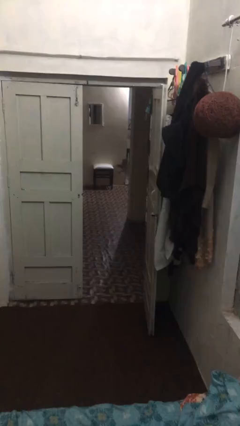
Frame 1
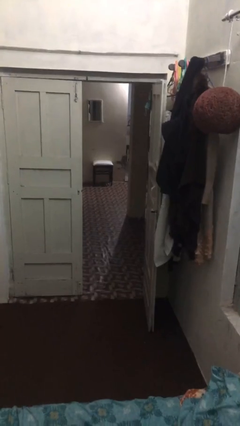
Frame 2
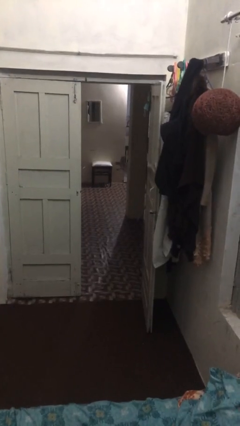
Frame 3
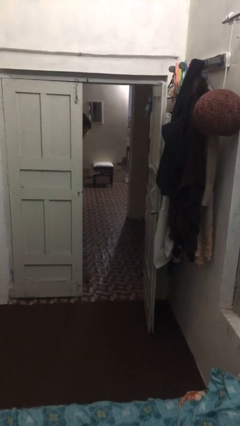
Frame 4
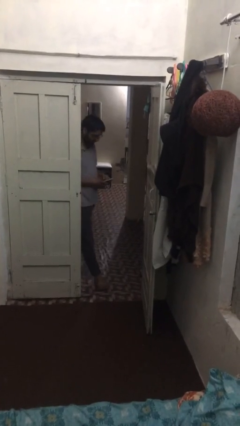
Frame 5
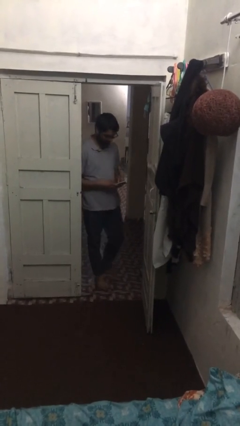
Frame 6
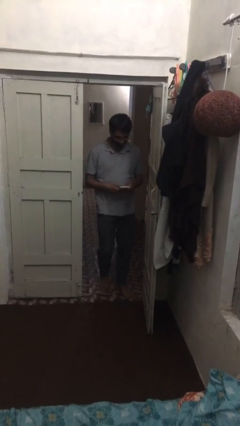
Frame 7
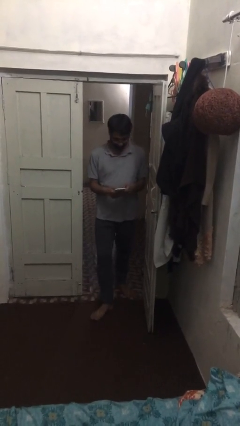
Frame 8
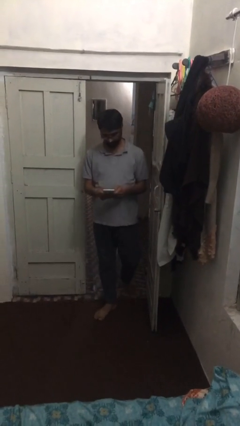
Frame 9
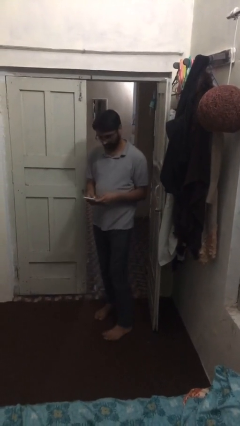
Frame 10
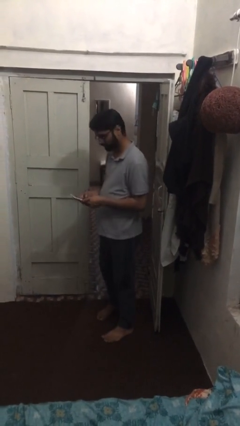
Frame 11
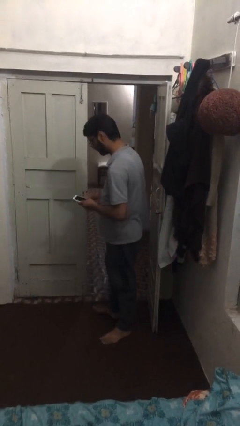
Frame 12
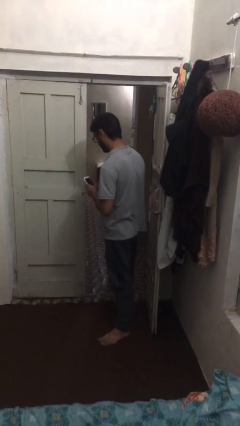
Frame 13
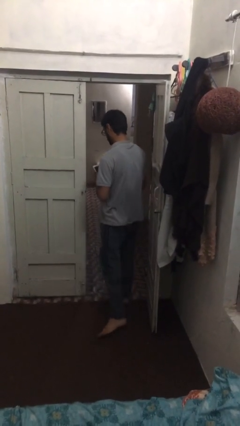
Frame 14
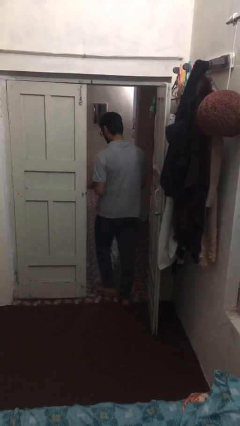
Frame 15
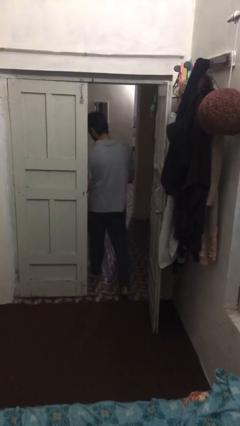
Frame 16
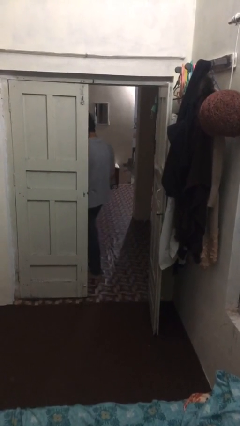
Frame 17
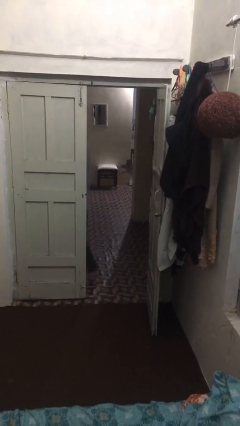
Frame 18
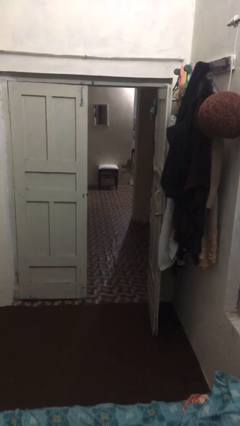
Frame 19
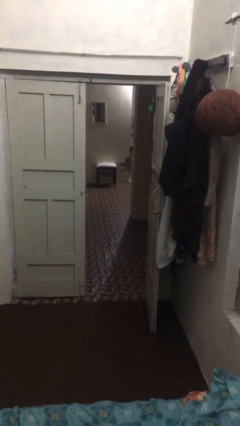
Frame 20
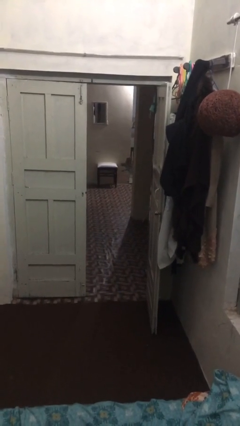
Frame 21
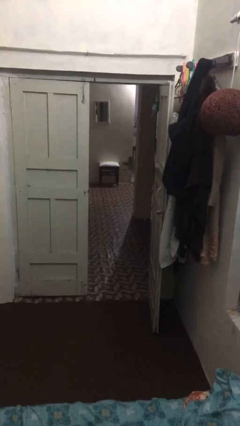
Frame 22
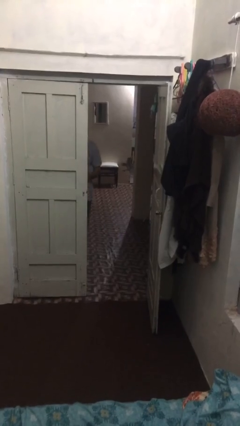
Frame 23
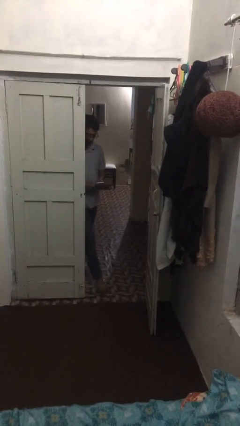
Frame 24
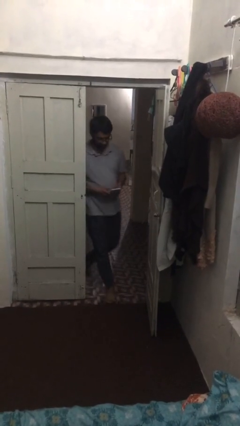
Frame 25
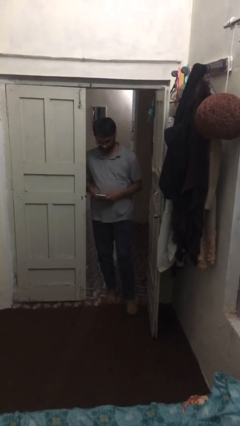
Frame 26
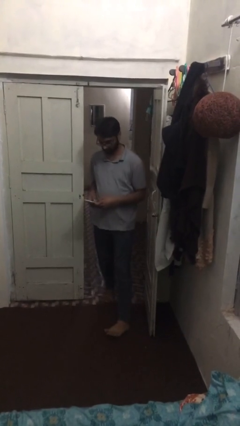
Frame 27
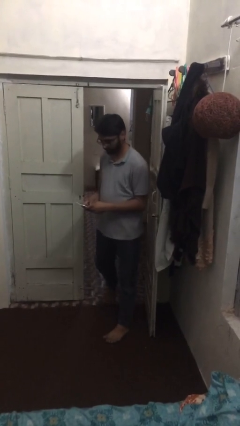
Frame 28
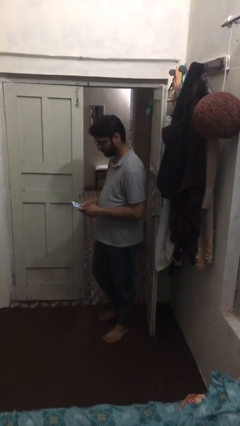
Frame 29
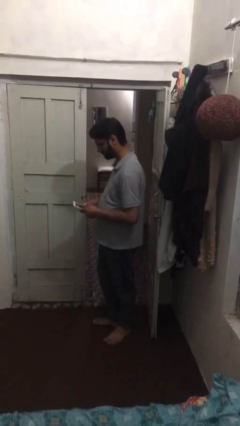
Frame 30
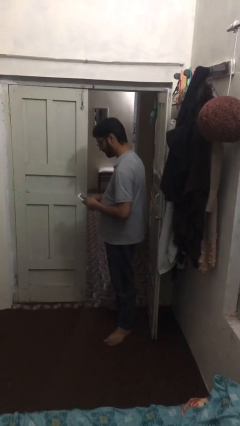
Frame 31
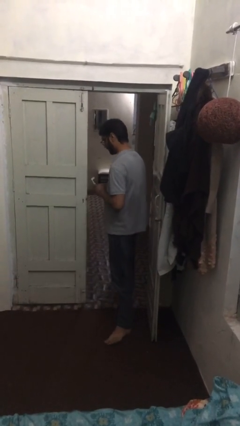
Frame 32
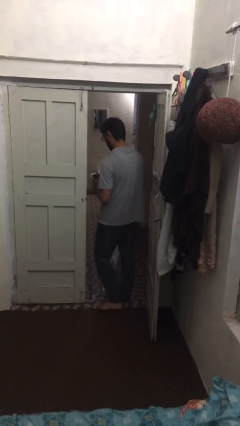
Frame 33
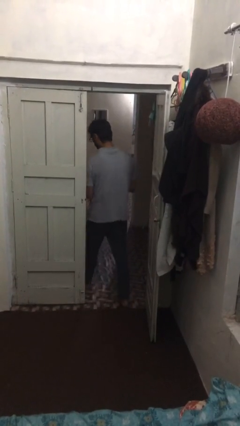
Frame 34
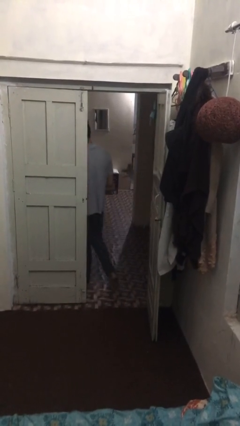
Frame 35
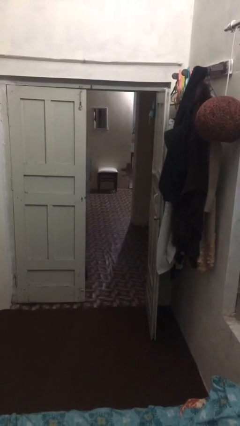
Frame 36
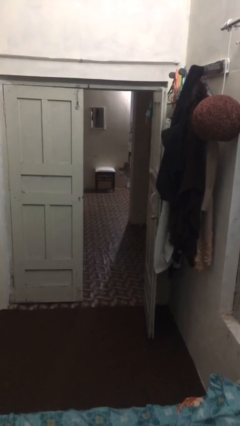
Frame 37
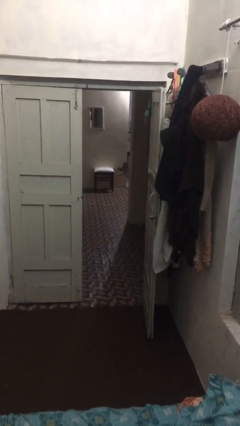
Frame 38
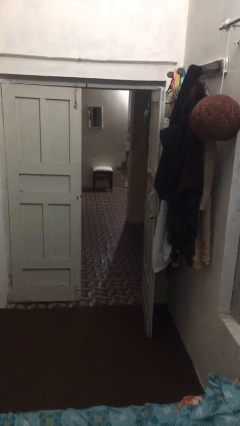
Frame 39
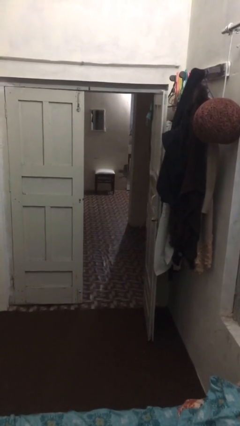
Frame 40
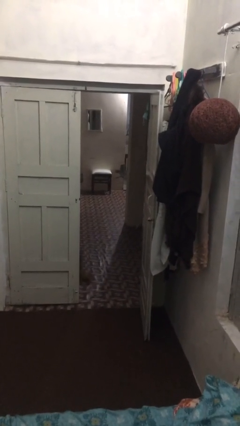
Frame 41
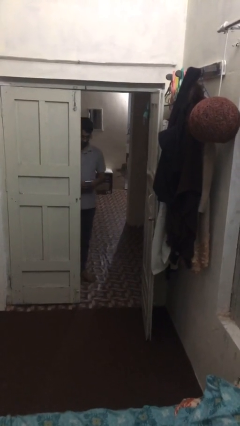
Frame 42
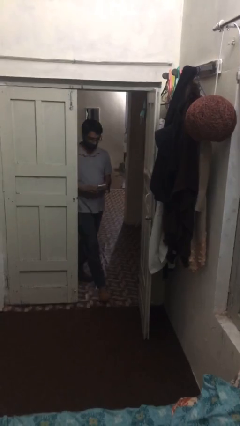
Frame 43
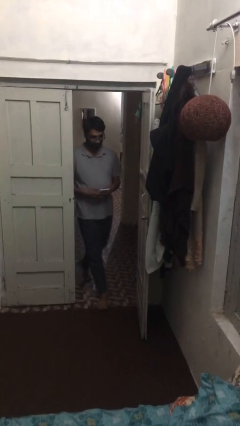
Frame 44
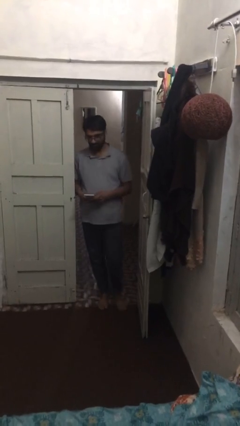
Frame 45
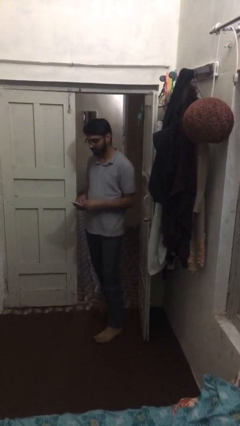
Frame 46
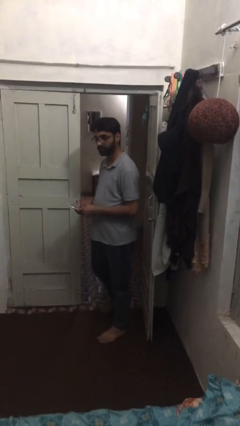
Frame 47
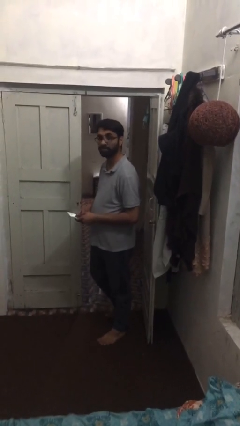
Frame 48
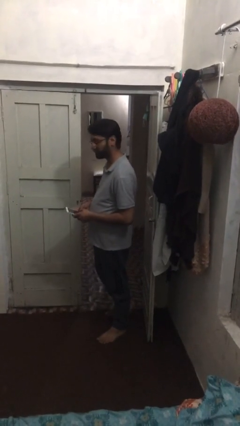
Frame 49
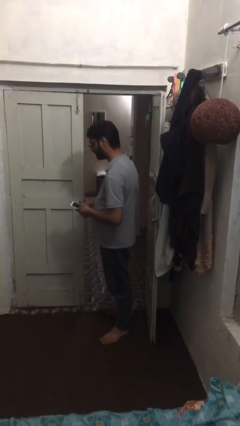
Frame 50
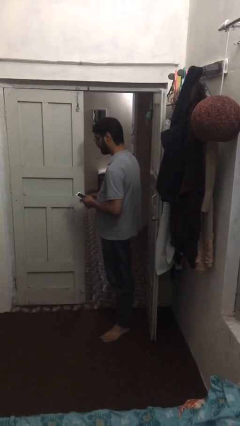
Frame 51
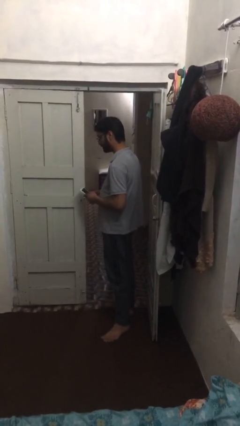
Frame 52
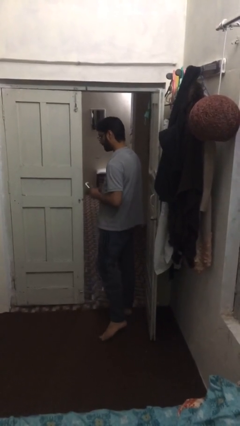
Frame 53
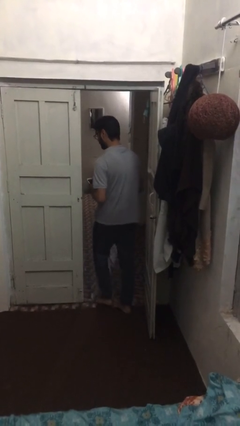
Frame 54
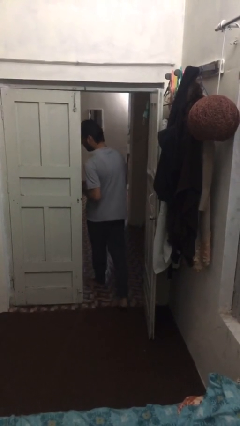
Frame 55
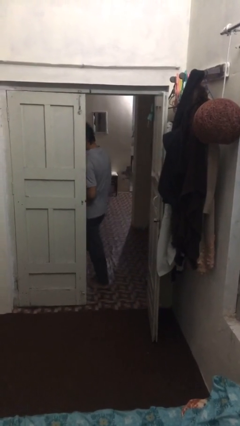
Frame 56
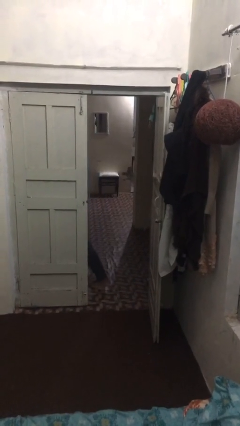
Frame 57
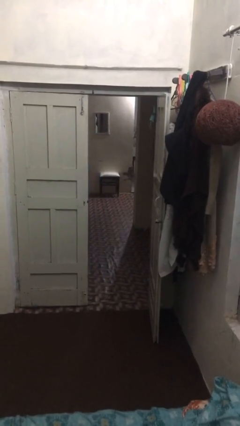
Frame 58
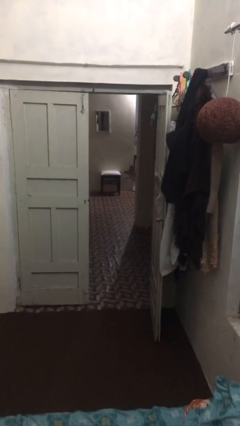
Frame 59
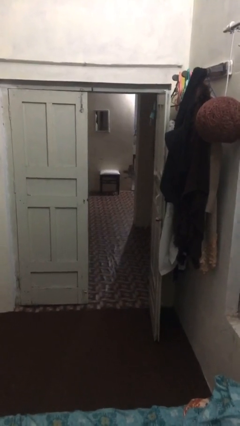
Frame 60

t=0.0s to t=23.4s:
person texts on phone

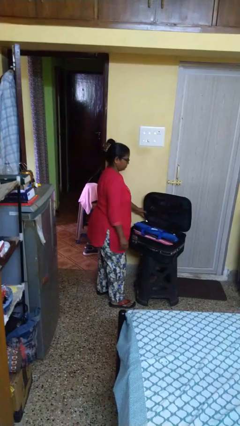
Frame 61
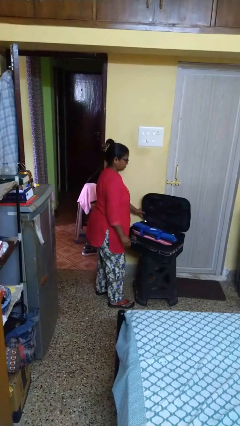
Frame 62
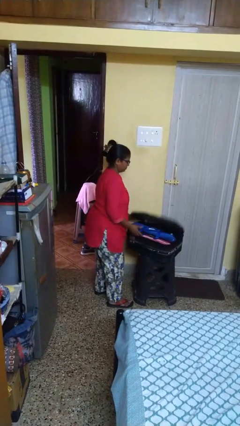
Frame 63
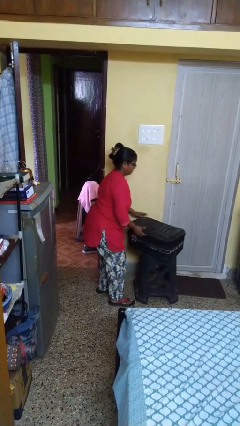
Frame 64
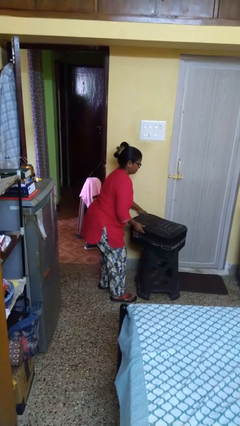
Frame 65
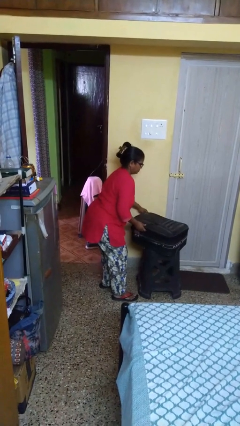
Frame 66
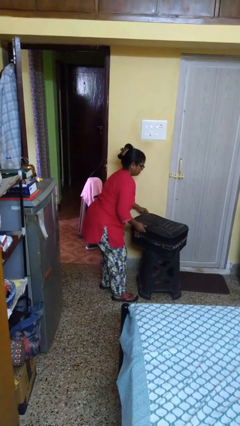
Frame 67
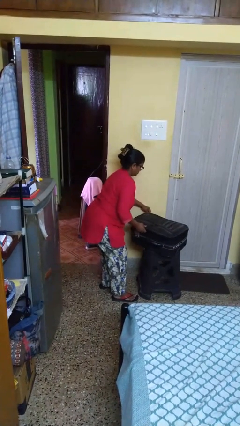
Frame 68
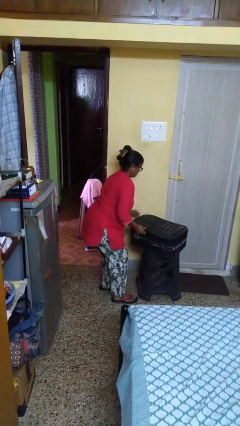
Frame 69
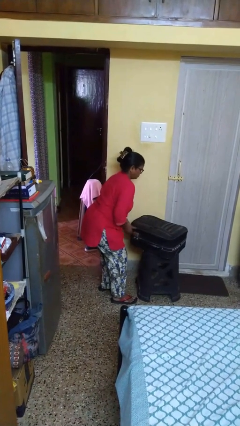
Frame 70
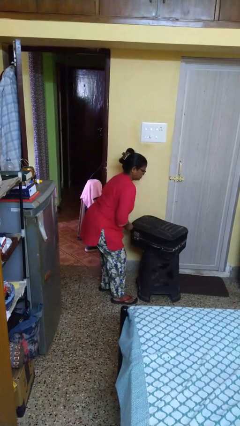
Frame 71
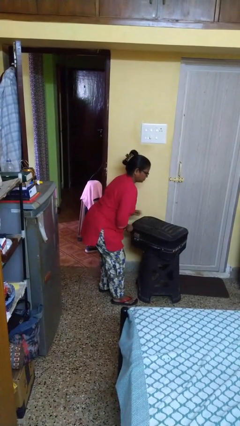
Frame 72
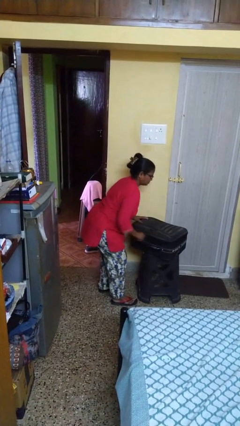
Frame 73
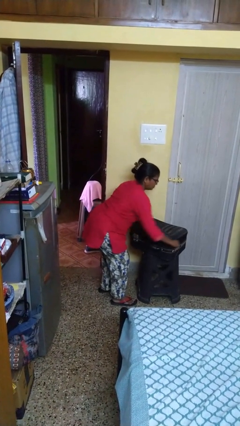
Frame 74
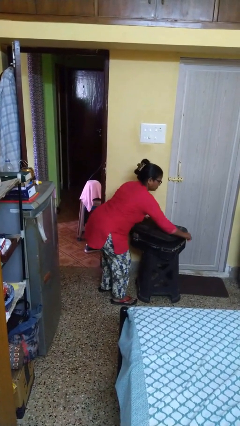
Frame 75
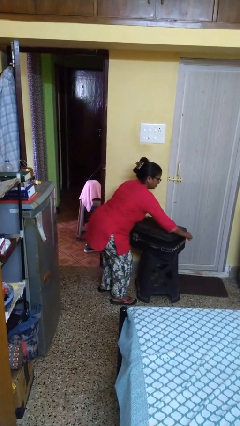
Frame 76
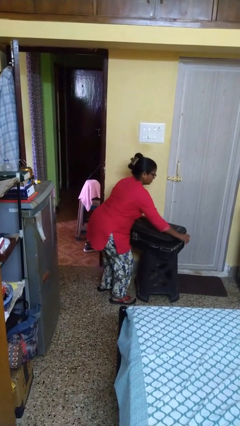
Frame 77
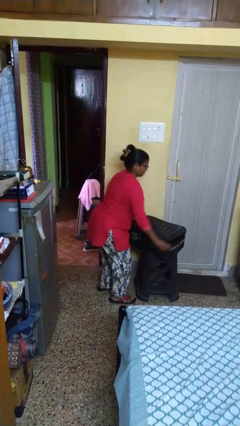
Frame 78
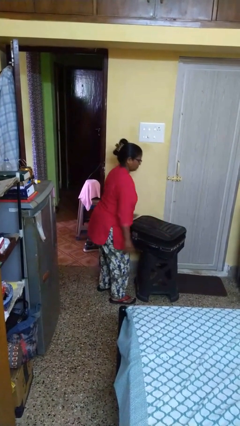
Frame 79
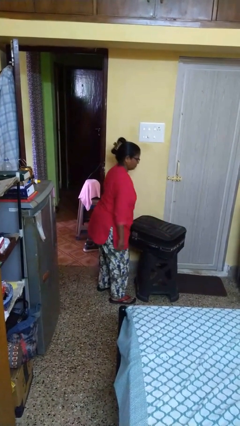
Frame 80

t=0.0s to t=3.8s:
person closes suitcase

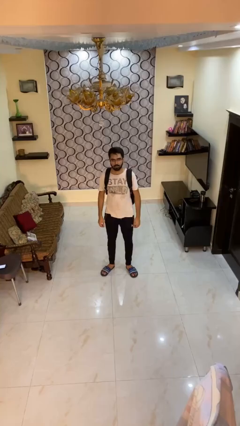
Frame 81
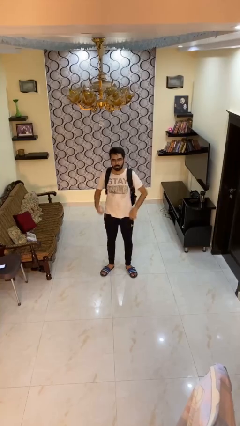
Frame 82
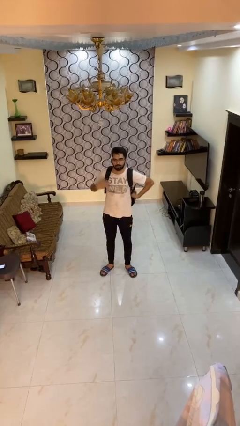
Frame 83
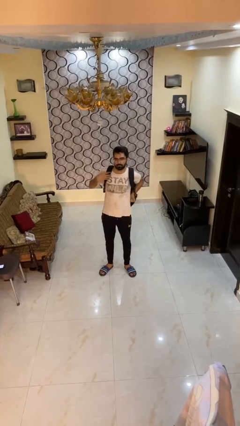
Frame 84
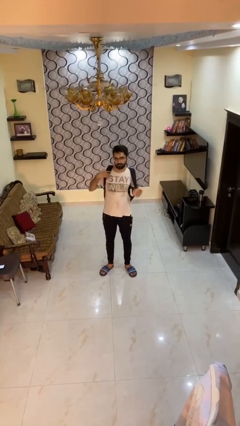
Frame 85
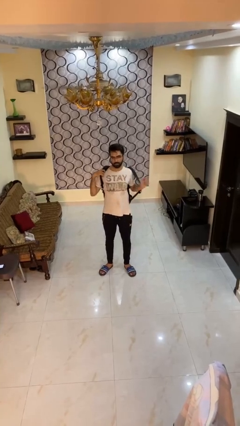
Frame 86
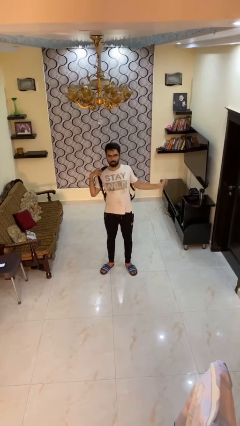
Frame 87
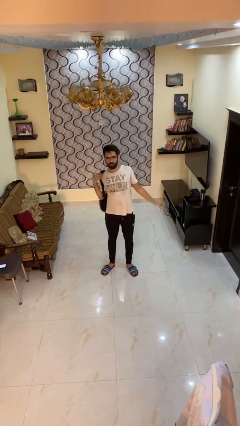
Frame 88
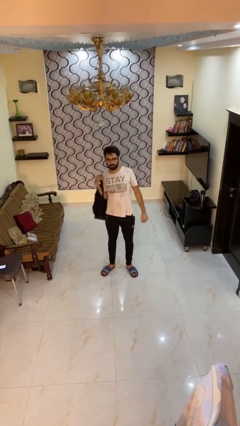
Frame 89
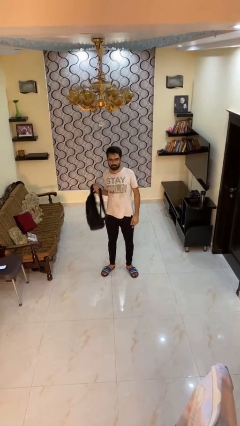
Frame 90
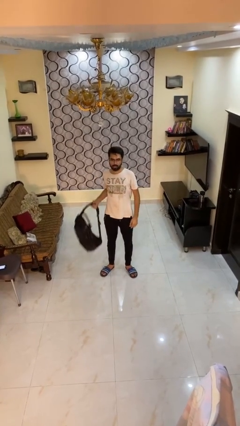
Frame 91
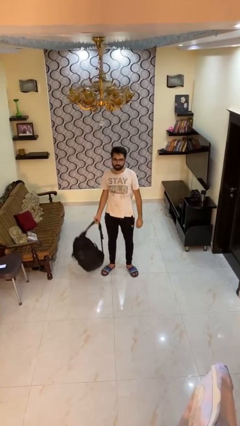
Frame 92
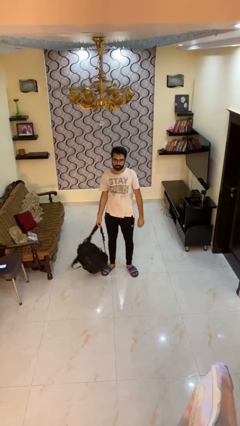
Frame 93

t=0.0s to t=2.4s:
person takes off backpack
